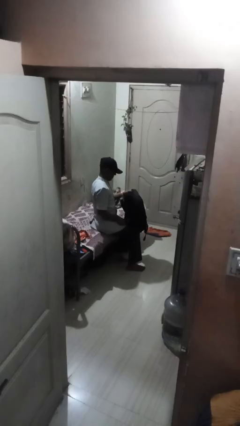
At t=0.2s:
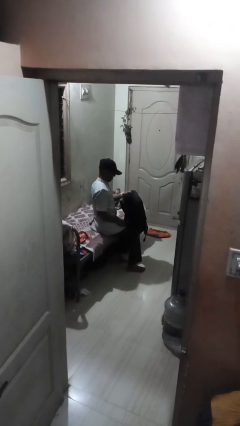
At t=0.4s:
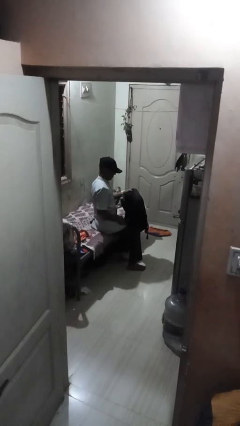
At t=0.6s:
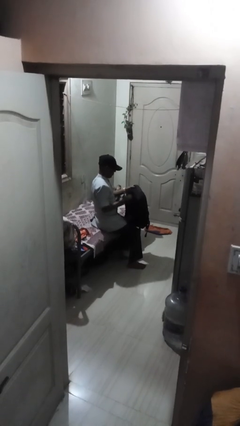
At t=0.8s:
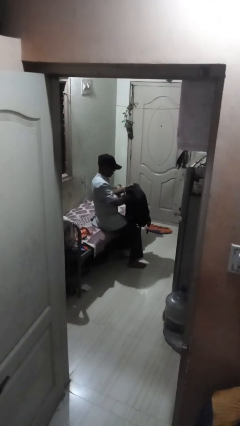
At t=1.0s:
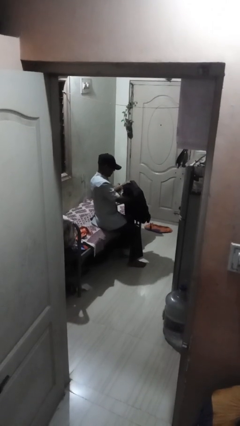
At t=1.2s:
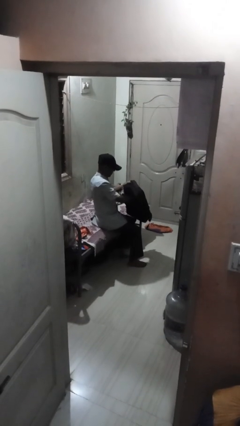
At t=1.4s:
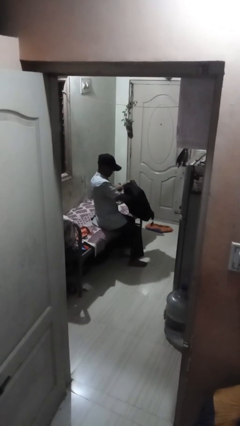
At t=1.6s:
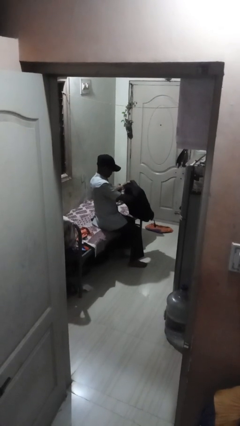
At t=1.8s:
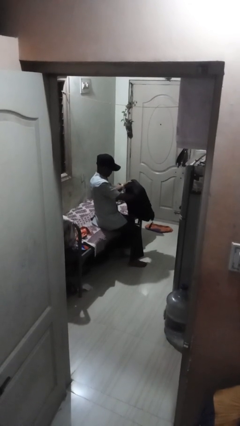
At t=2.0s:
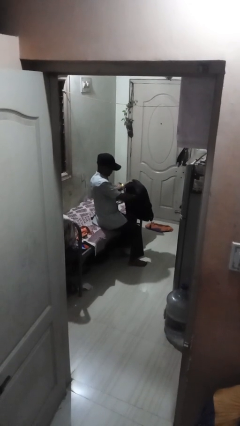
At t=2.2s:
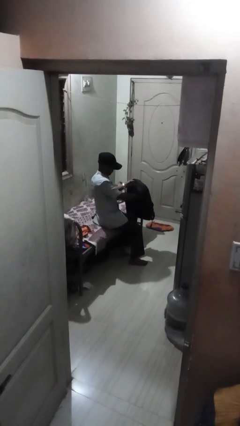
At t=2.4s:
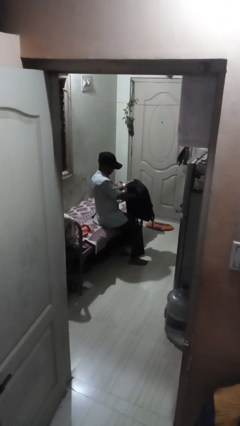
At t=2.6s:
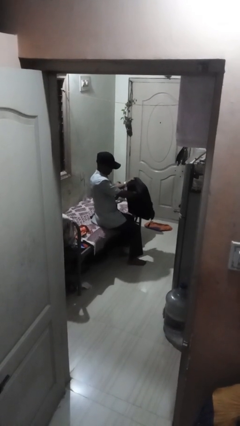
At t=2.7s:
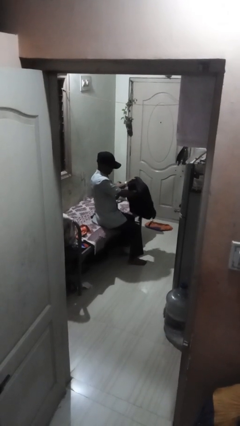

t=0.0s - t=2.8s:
person searches in backpack

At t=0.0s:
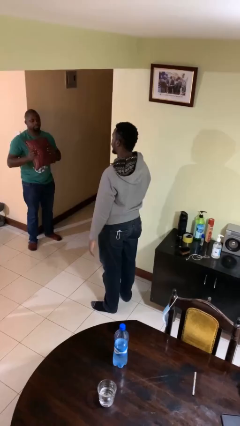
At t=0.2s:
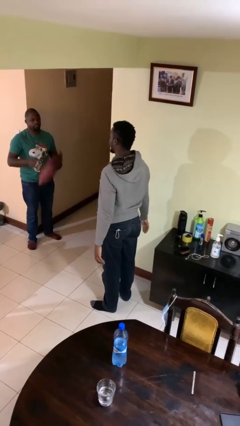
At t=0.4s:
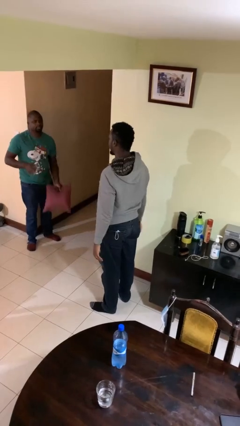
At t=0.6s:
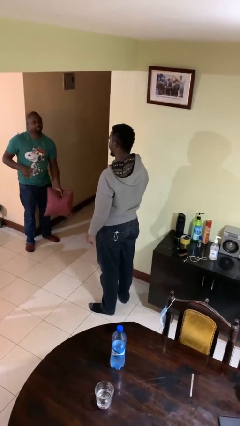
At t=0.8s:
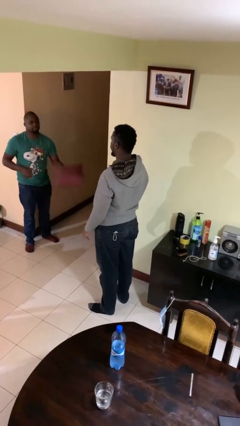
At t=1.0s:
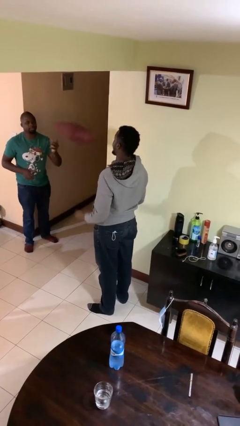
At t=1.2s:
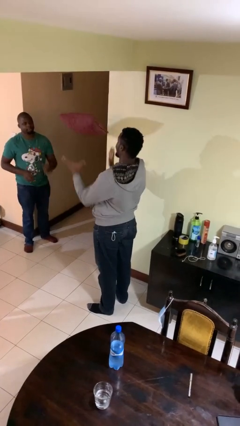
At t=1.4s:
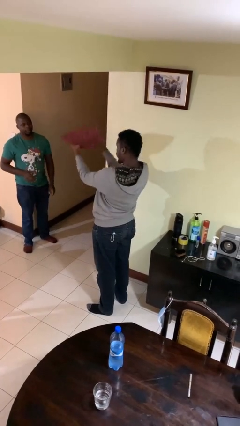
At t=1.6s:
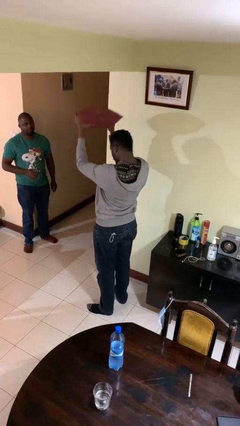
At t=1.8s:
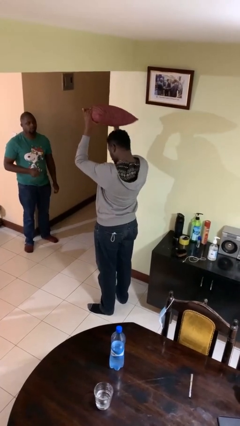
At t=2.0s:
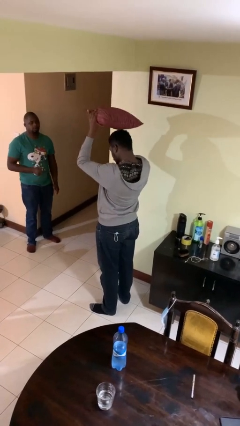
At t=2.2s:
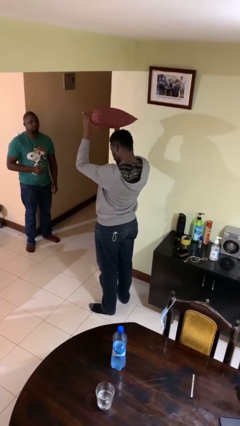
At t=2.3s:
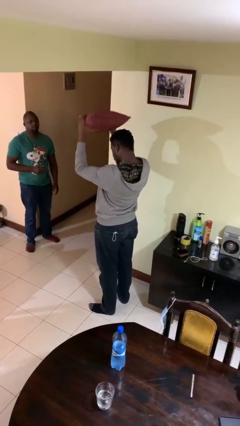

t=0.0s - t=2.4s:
person catches object from person

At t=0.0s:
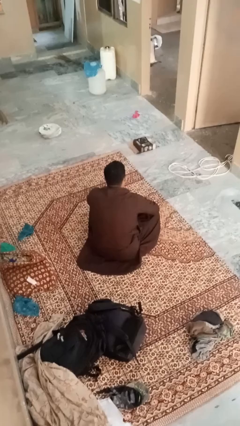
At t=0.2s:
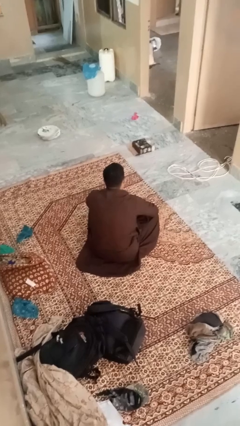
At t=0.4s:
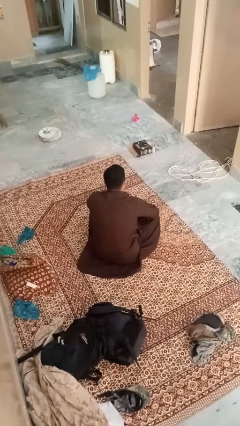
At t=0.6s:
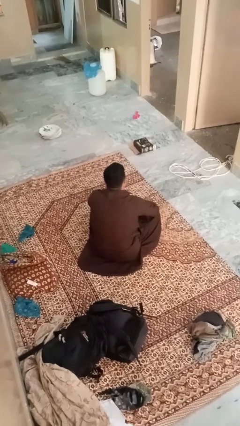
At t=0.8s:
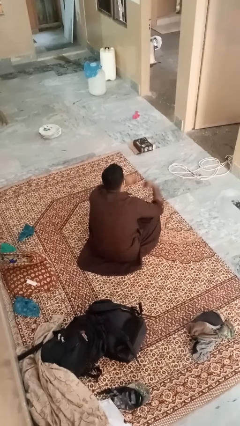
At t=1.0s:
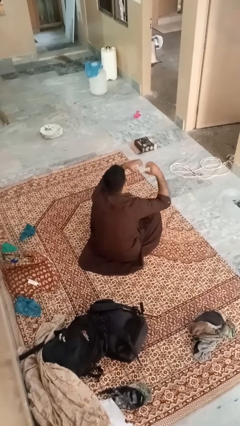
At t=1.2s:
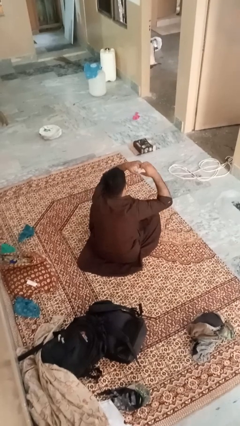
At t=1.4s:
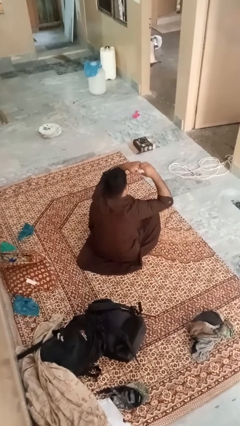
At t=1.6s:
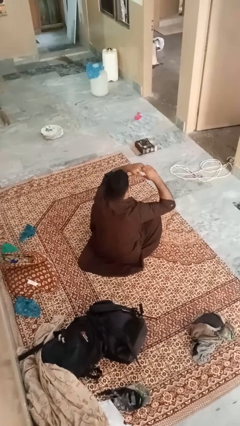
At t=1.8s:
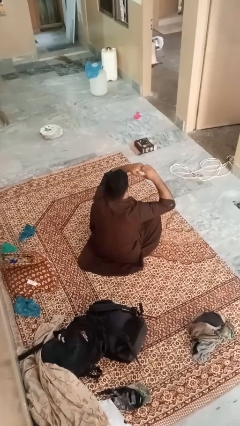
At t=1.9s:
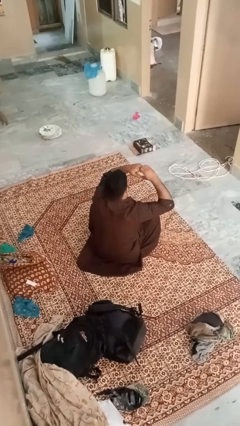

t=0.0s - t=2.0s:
person gestures heart

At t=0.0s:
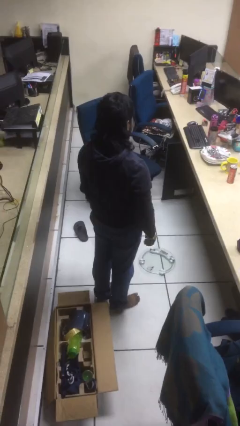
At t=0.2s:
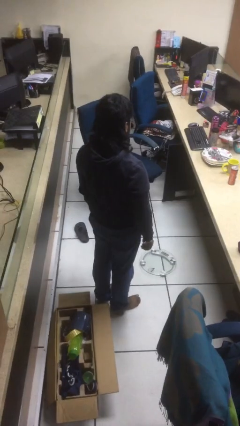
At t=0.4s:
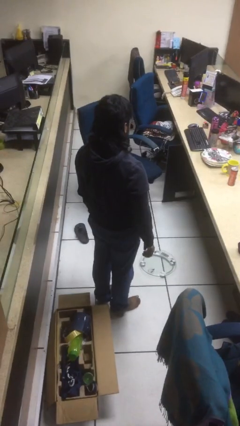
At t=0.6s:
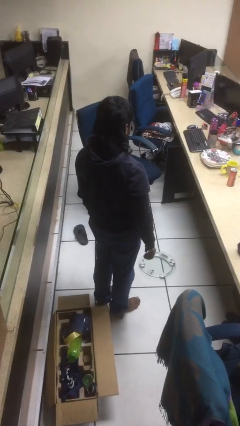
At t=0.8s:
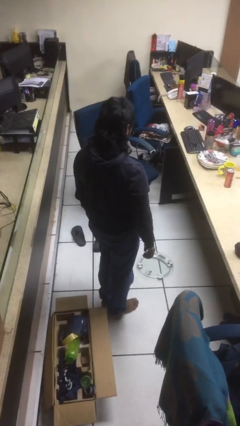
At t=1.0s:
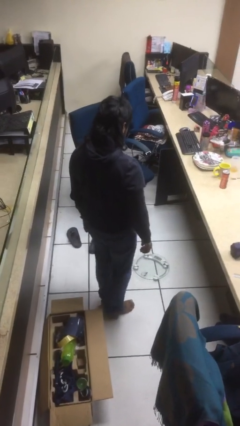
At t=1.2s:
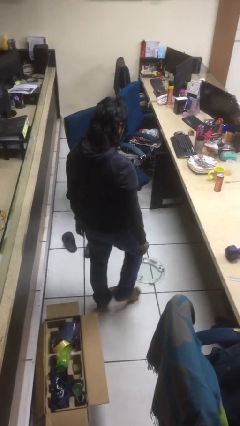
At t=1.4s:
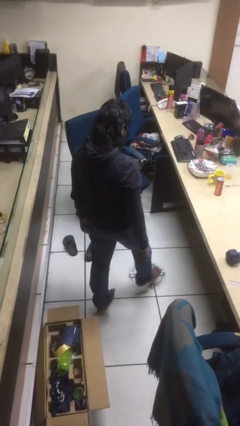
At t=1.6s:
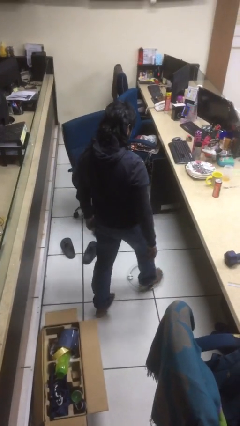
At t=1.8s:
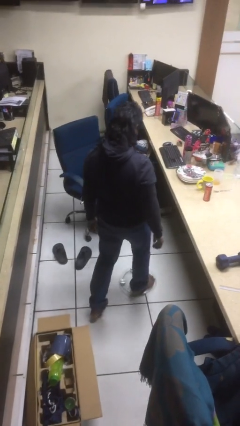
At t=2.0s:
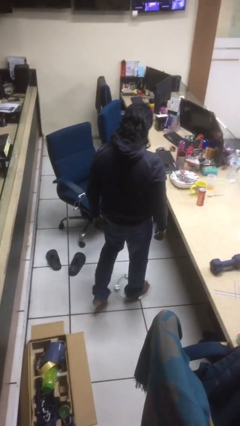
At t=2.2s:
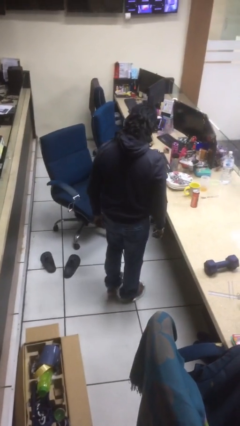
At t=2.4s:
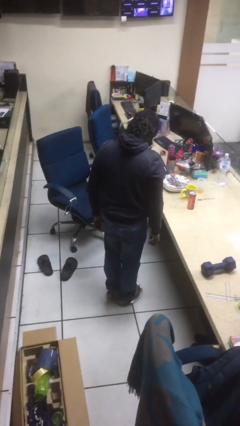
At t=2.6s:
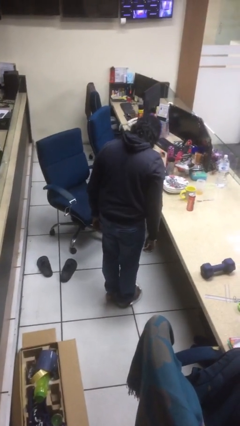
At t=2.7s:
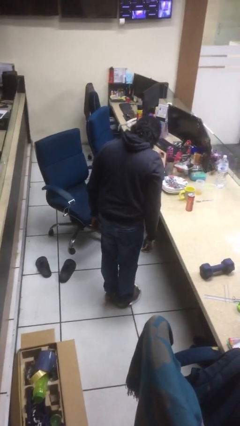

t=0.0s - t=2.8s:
person uses bodyweight scale

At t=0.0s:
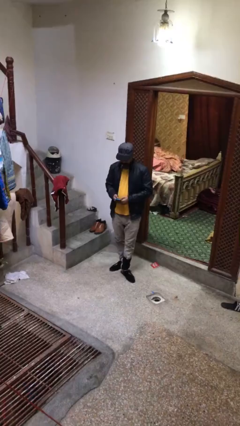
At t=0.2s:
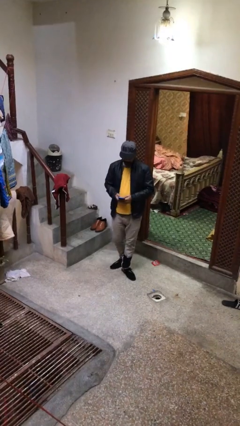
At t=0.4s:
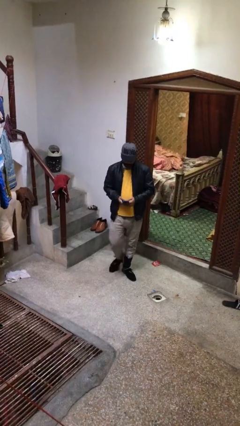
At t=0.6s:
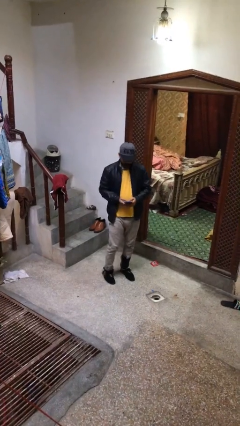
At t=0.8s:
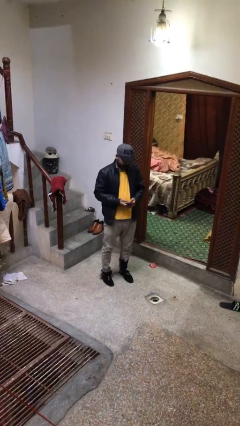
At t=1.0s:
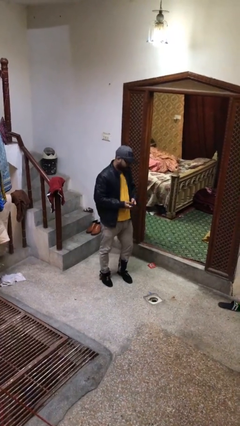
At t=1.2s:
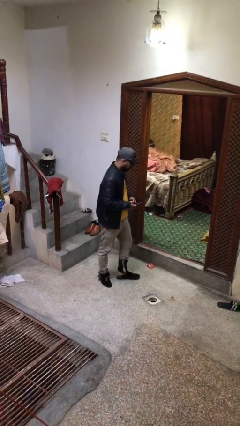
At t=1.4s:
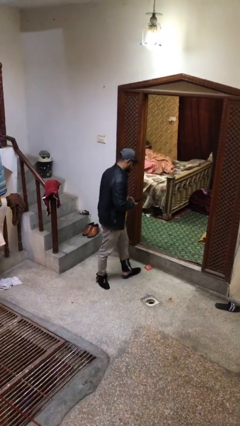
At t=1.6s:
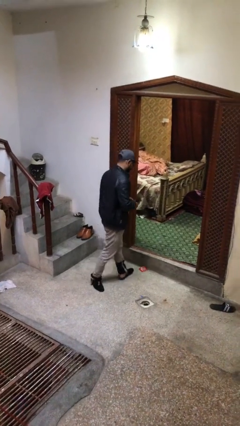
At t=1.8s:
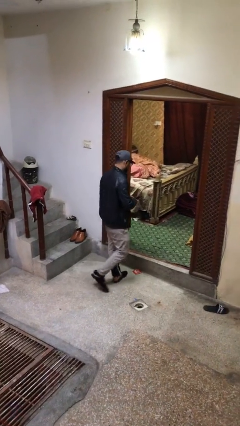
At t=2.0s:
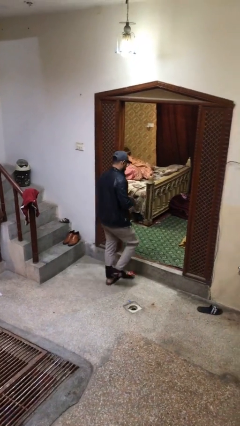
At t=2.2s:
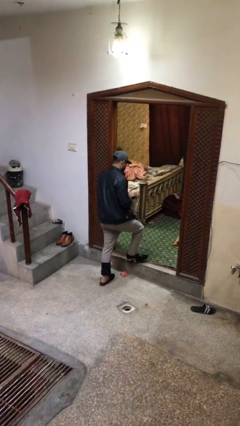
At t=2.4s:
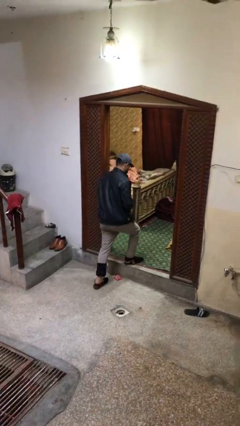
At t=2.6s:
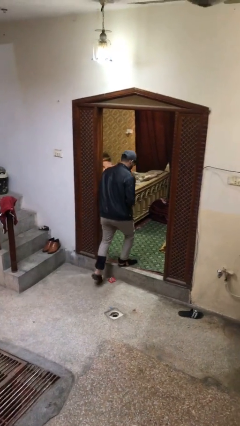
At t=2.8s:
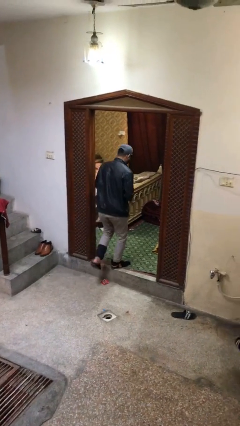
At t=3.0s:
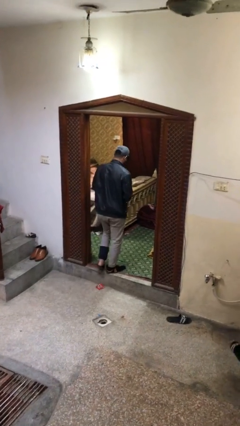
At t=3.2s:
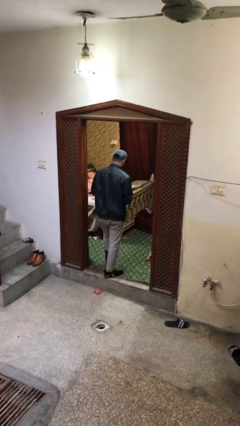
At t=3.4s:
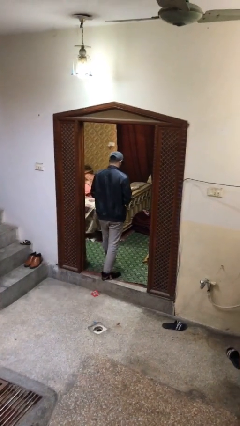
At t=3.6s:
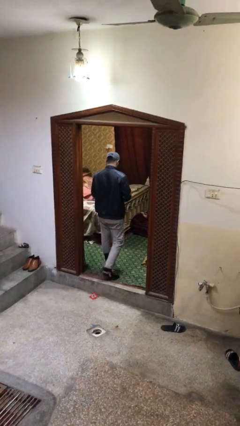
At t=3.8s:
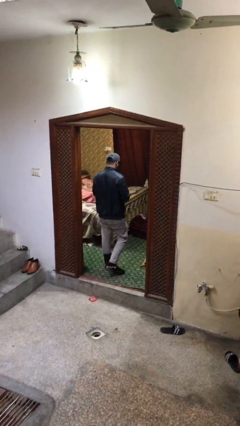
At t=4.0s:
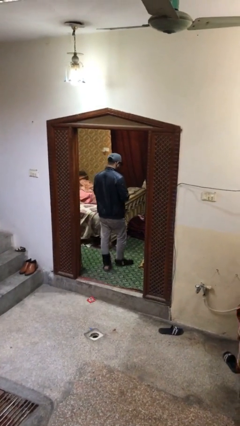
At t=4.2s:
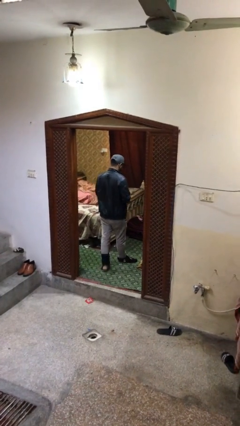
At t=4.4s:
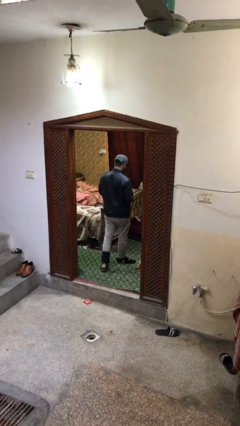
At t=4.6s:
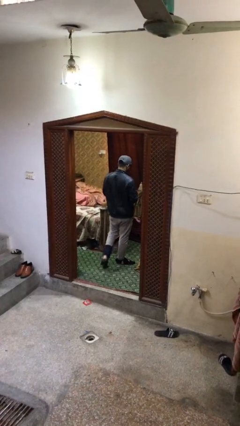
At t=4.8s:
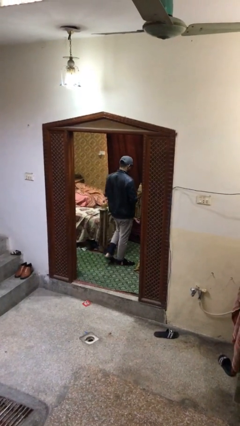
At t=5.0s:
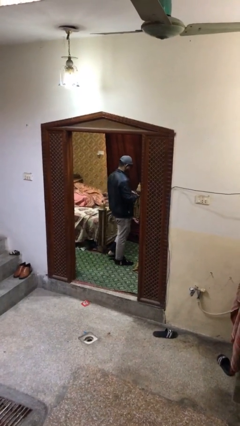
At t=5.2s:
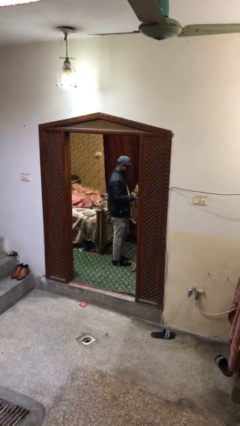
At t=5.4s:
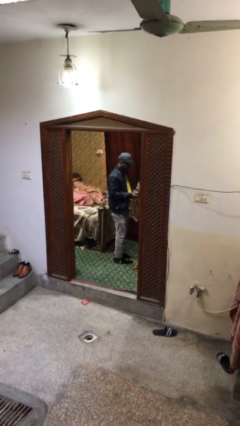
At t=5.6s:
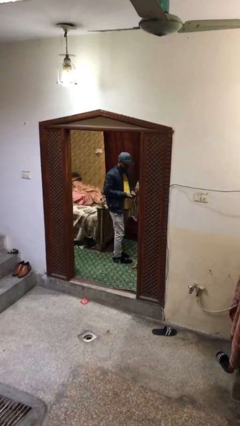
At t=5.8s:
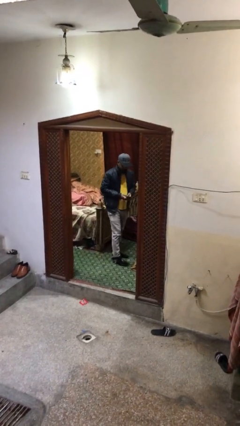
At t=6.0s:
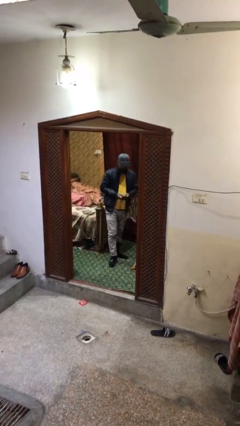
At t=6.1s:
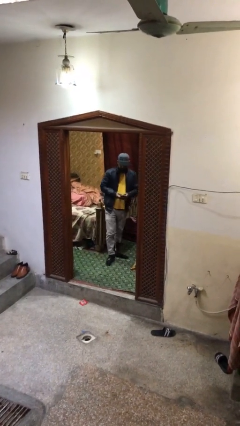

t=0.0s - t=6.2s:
person exits scene through structure

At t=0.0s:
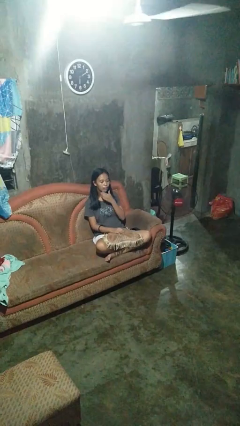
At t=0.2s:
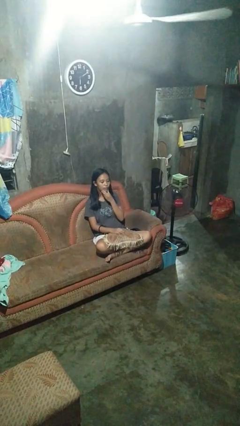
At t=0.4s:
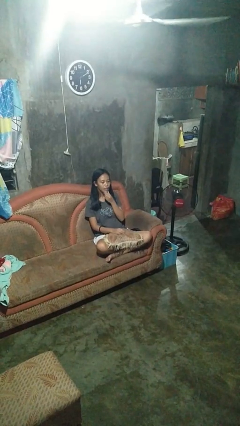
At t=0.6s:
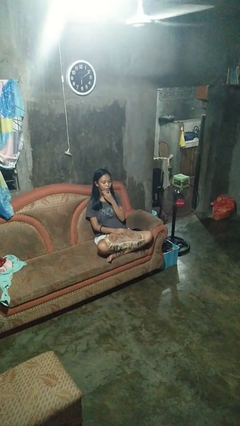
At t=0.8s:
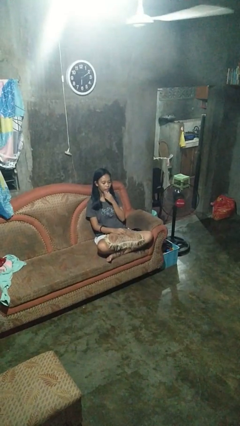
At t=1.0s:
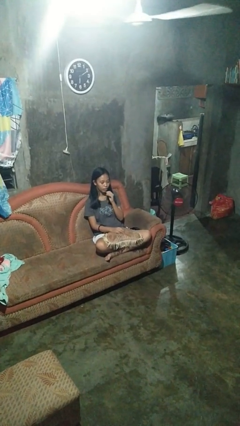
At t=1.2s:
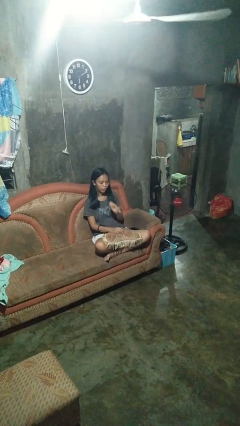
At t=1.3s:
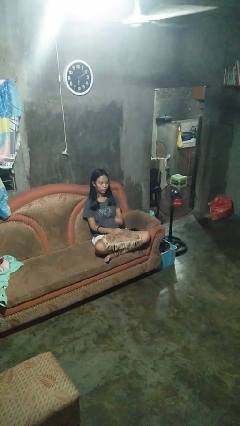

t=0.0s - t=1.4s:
person strokes chin
